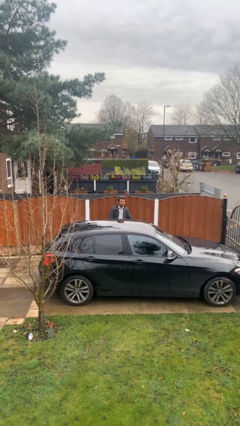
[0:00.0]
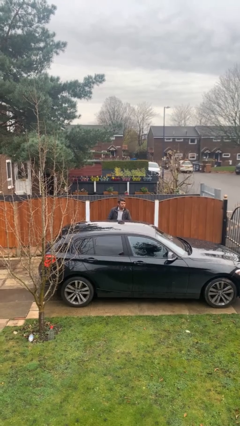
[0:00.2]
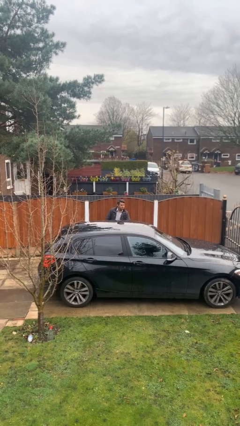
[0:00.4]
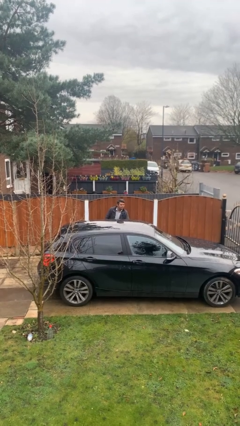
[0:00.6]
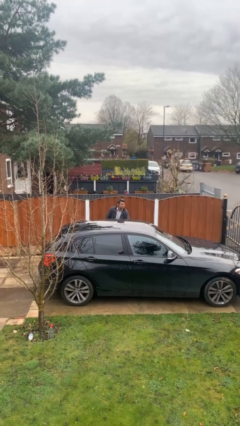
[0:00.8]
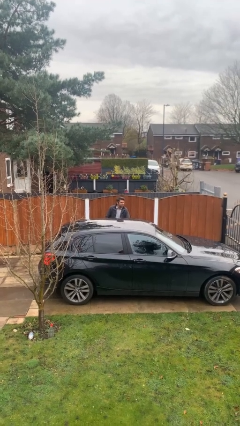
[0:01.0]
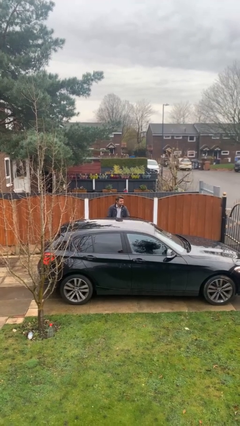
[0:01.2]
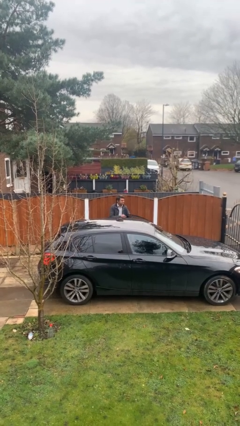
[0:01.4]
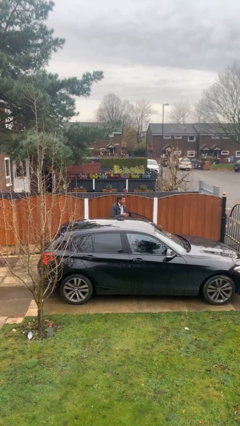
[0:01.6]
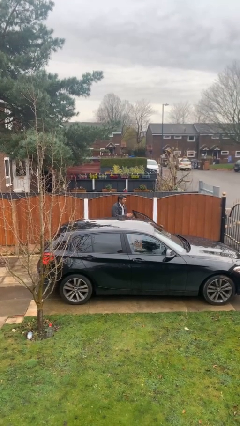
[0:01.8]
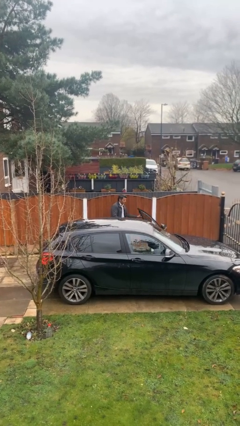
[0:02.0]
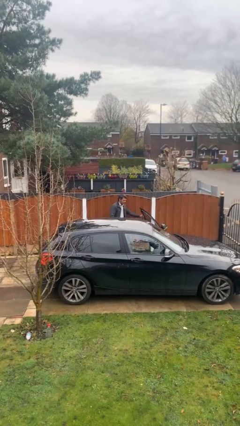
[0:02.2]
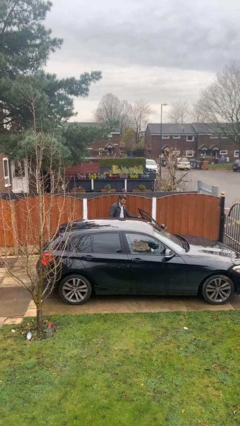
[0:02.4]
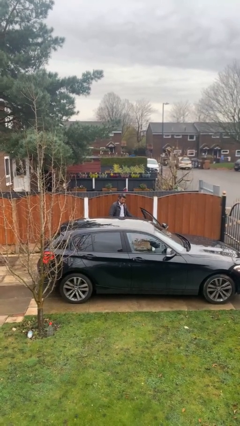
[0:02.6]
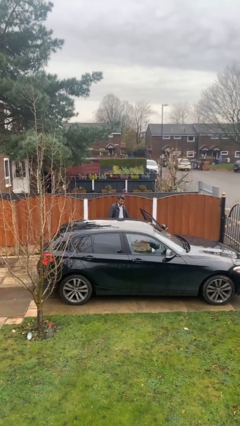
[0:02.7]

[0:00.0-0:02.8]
person opens car door

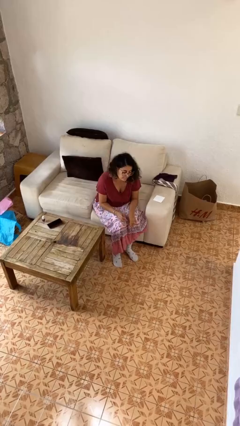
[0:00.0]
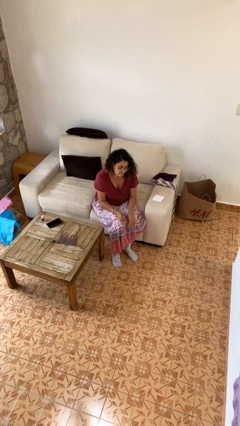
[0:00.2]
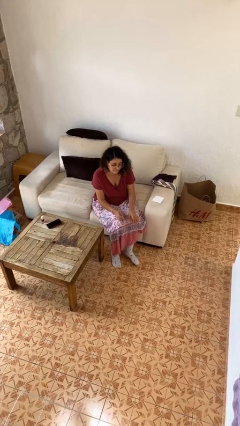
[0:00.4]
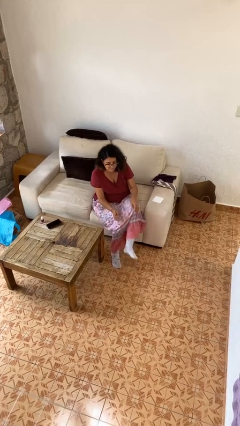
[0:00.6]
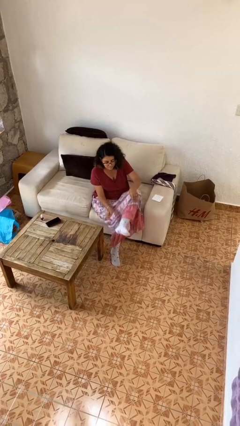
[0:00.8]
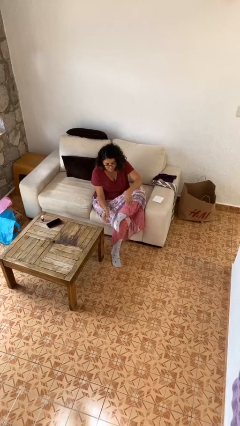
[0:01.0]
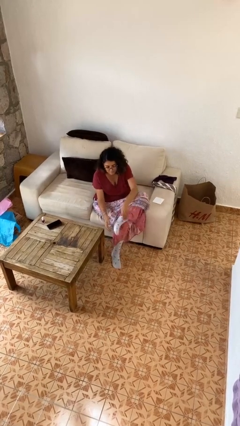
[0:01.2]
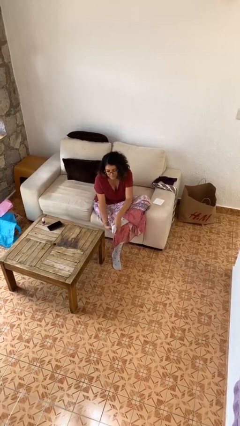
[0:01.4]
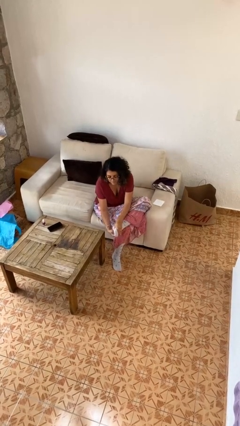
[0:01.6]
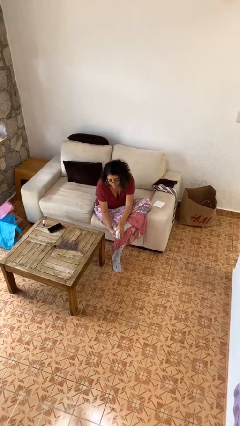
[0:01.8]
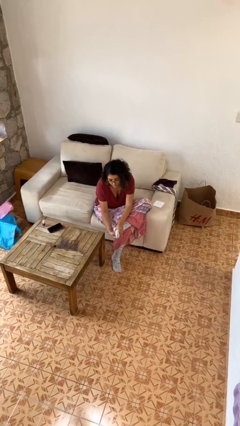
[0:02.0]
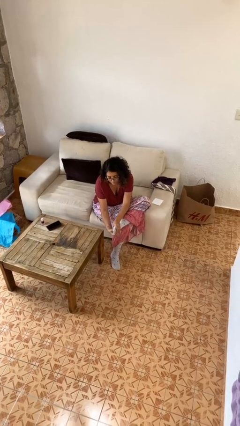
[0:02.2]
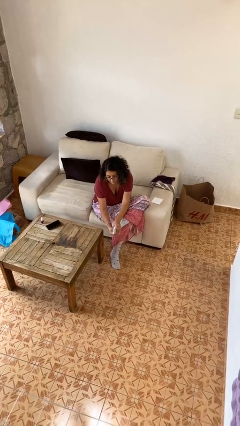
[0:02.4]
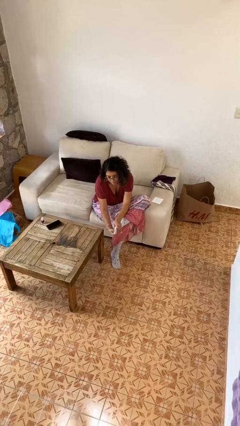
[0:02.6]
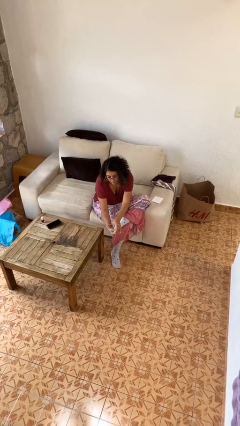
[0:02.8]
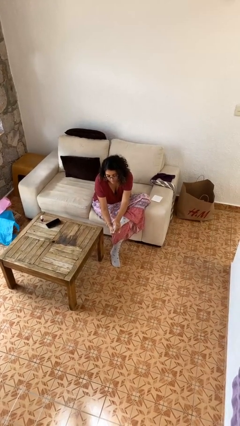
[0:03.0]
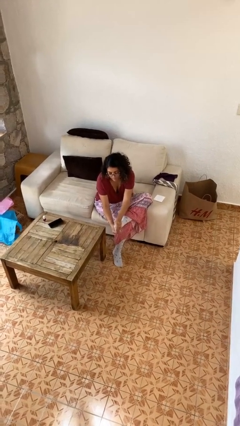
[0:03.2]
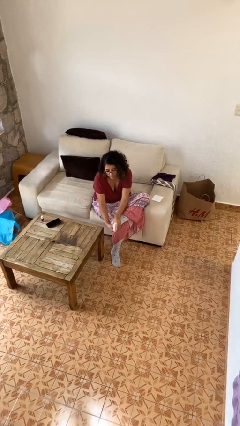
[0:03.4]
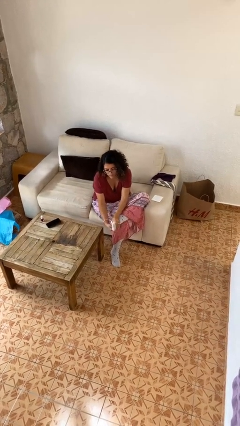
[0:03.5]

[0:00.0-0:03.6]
person rubs foot

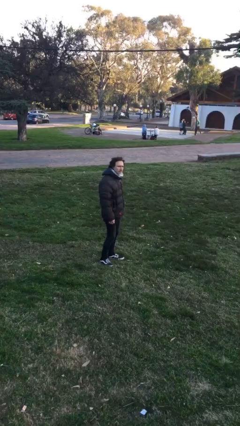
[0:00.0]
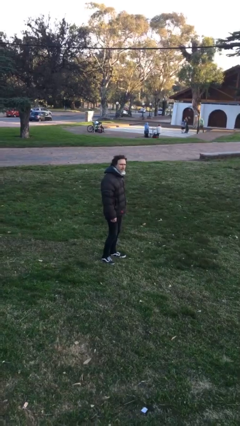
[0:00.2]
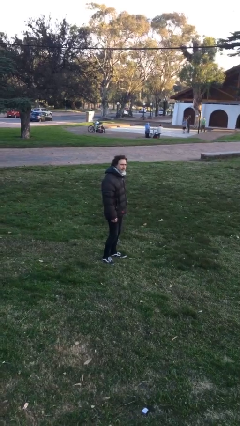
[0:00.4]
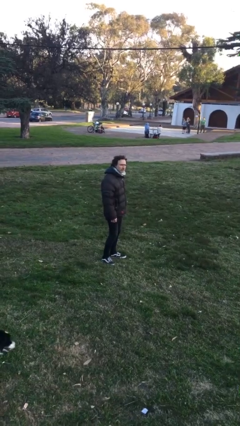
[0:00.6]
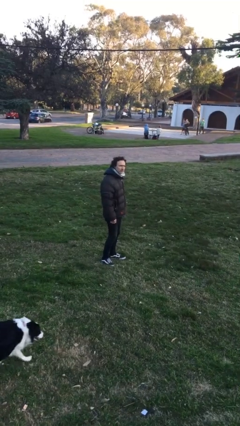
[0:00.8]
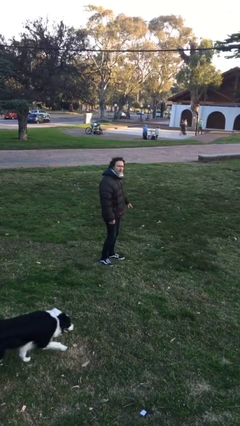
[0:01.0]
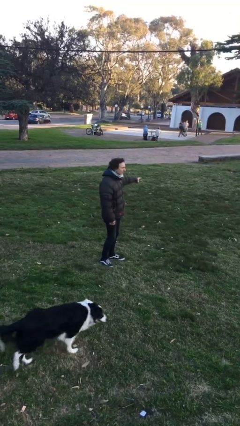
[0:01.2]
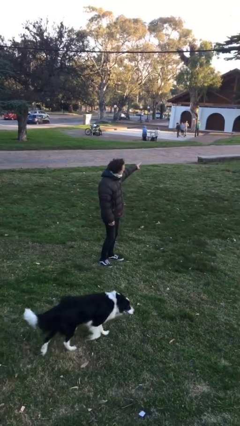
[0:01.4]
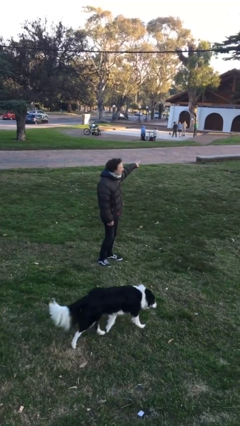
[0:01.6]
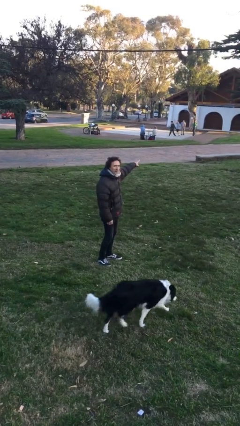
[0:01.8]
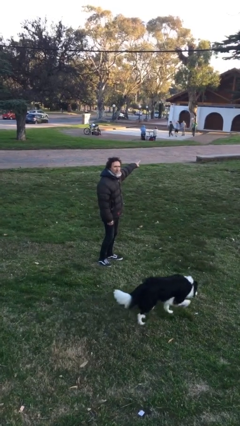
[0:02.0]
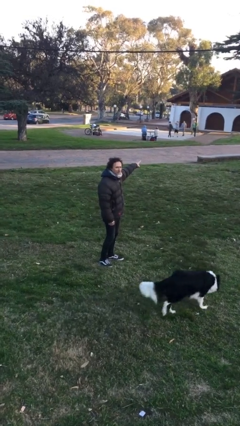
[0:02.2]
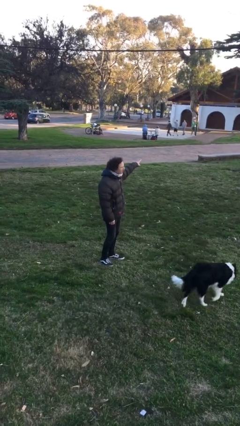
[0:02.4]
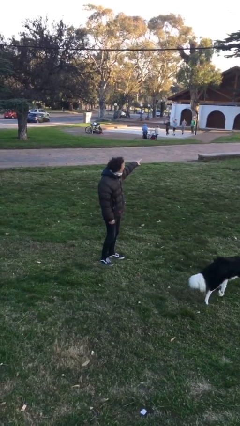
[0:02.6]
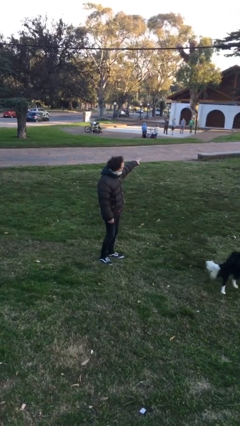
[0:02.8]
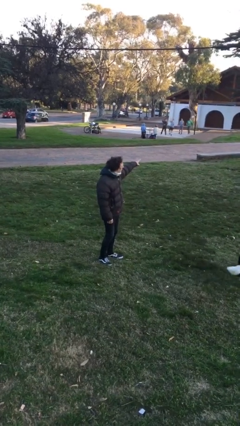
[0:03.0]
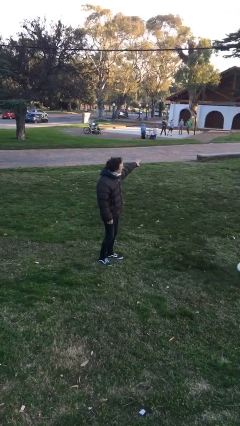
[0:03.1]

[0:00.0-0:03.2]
person points at person

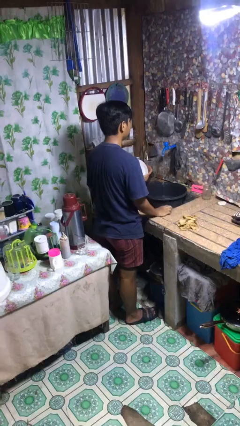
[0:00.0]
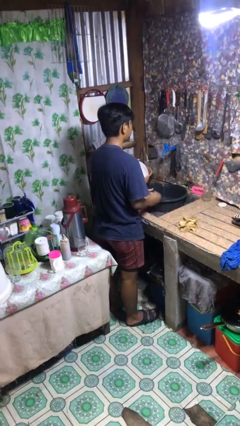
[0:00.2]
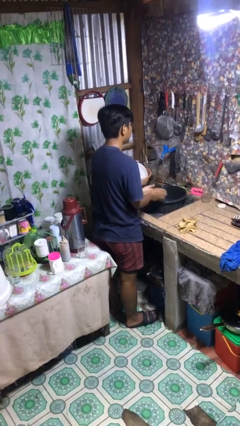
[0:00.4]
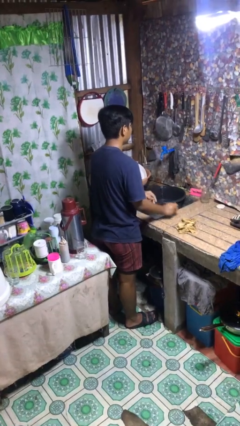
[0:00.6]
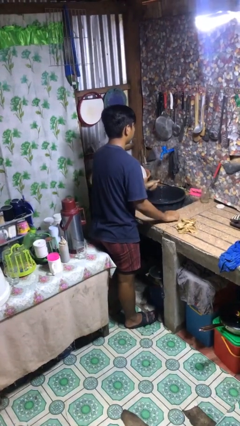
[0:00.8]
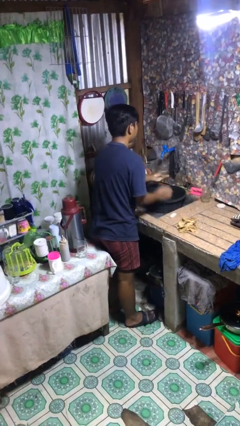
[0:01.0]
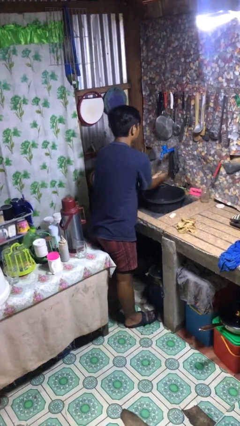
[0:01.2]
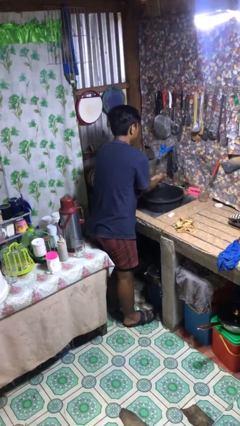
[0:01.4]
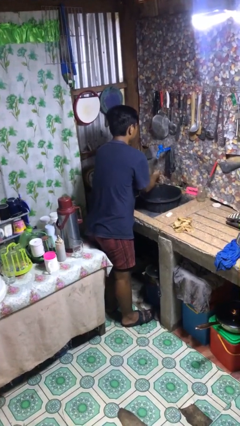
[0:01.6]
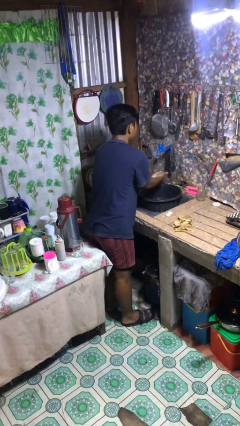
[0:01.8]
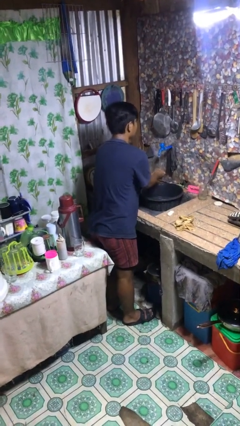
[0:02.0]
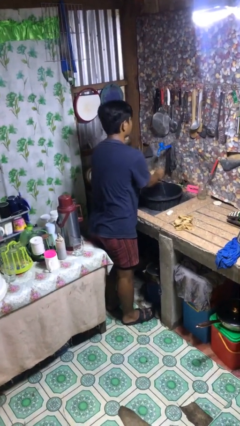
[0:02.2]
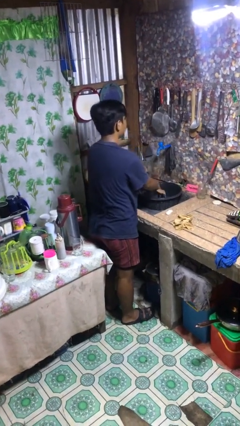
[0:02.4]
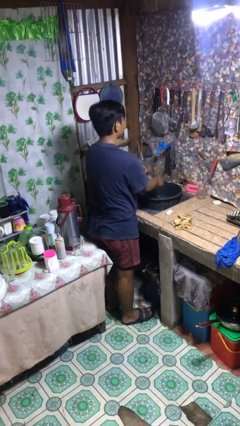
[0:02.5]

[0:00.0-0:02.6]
person washes hands

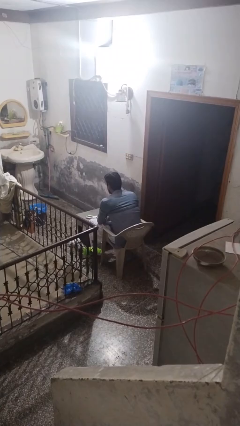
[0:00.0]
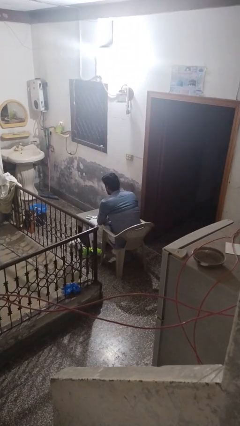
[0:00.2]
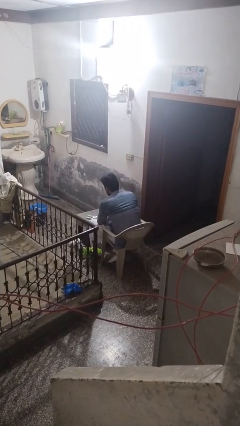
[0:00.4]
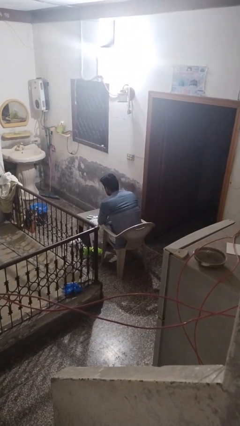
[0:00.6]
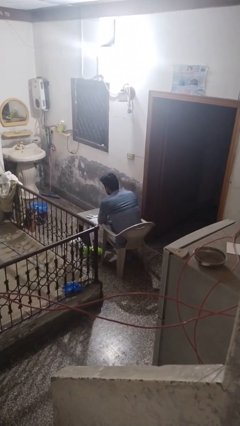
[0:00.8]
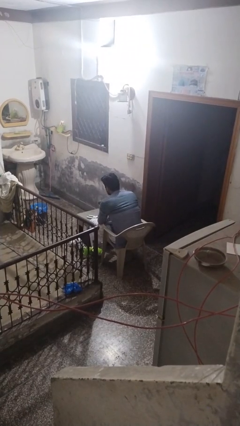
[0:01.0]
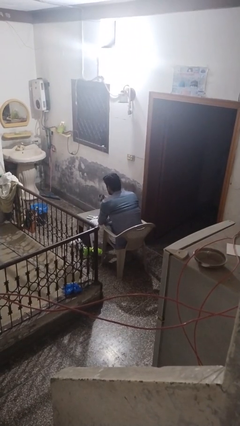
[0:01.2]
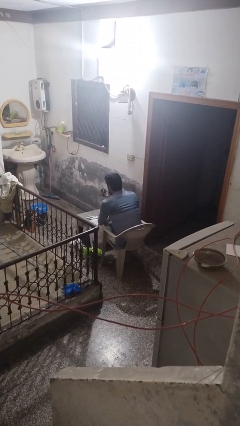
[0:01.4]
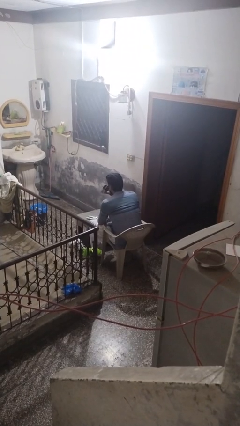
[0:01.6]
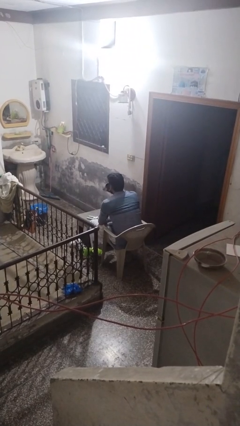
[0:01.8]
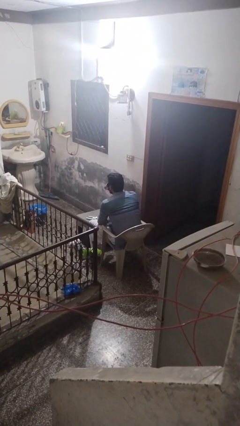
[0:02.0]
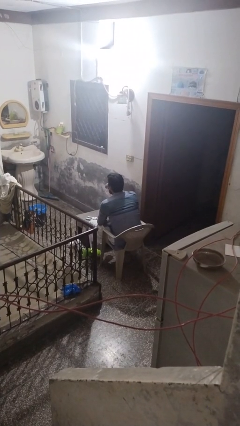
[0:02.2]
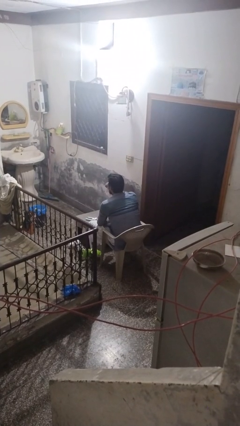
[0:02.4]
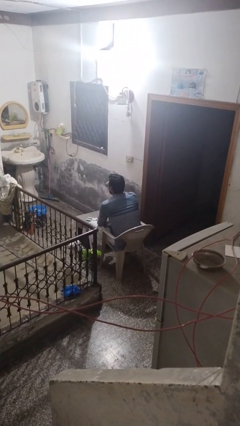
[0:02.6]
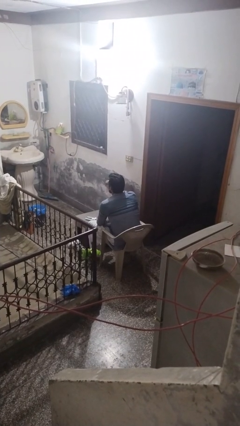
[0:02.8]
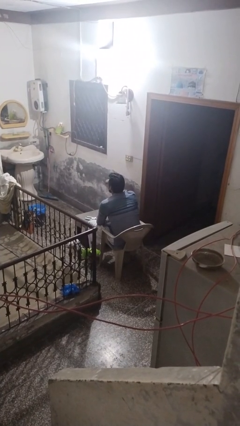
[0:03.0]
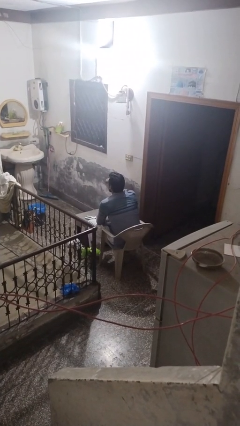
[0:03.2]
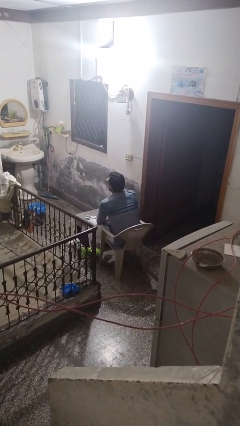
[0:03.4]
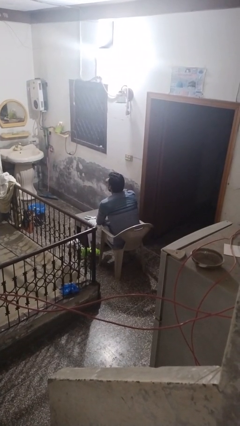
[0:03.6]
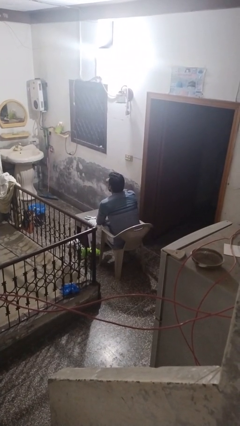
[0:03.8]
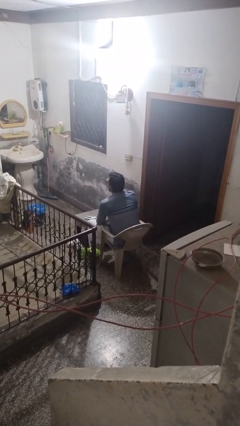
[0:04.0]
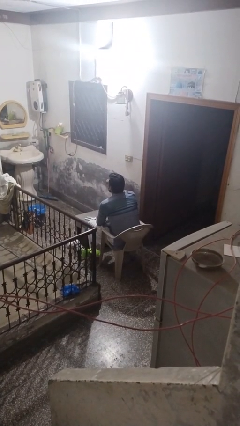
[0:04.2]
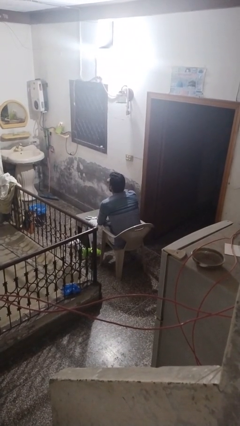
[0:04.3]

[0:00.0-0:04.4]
person drinks from cup

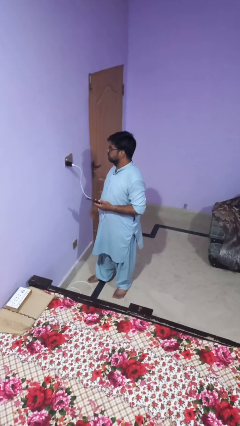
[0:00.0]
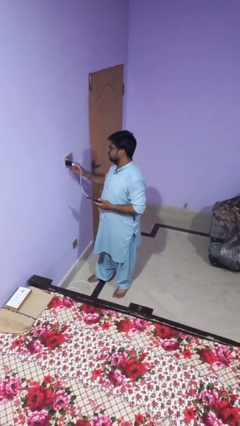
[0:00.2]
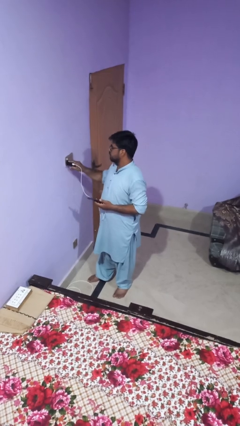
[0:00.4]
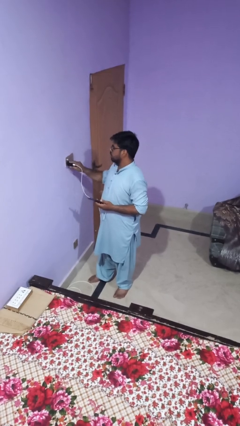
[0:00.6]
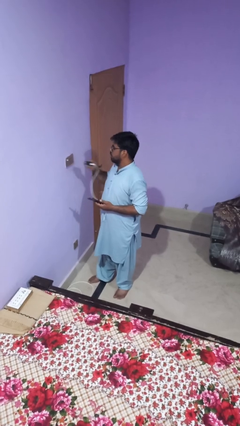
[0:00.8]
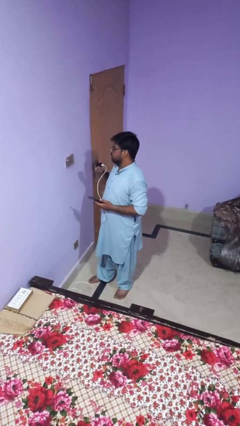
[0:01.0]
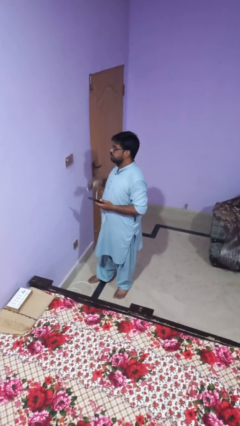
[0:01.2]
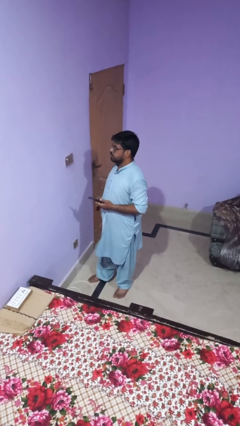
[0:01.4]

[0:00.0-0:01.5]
person unplugs from electrical socket
